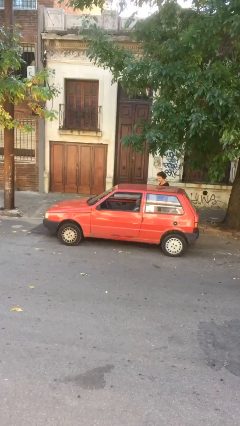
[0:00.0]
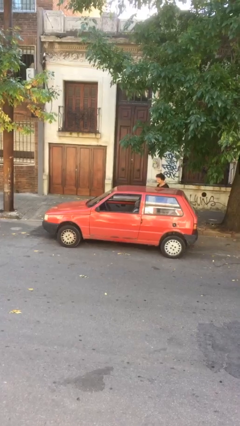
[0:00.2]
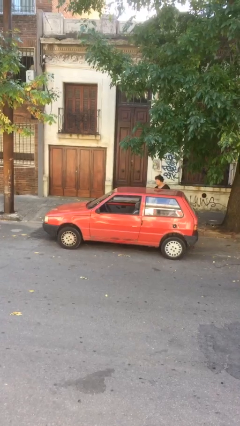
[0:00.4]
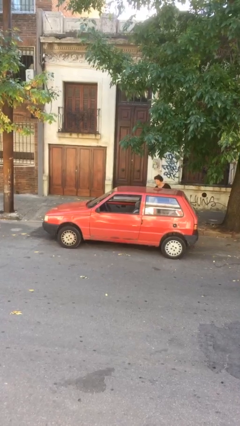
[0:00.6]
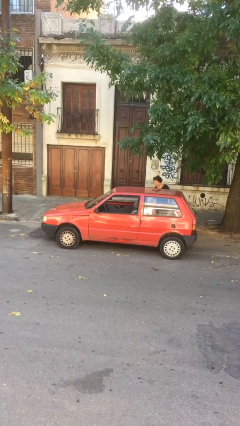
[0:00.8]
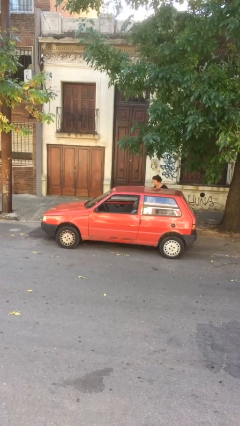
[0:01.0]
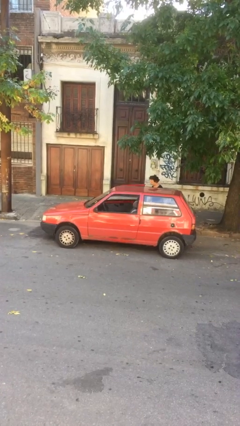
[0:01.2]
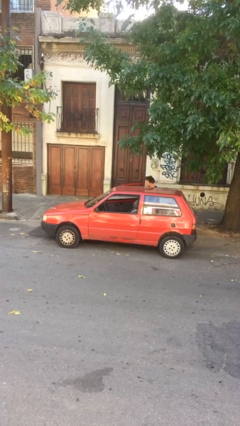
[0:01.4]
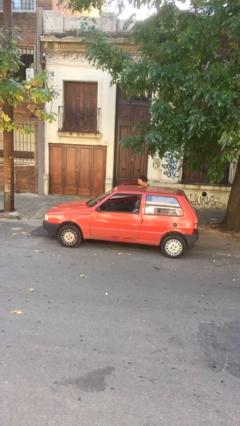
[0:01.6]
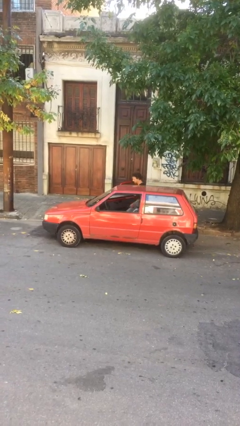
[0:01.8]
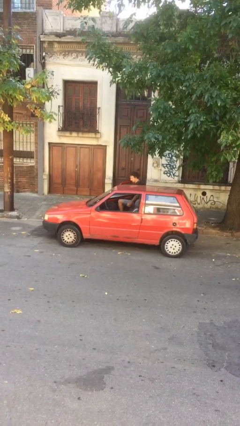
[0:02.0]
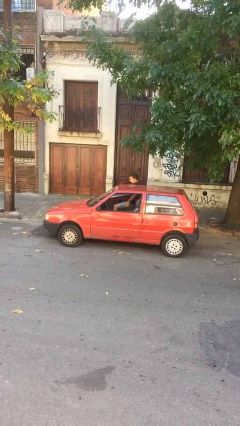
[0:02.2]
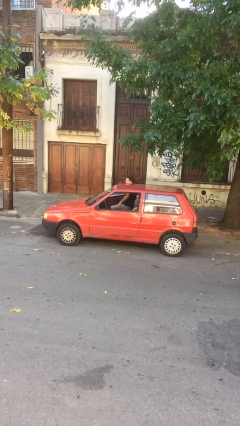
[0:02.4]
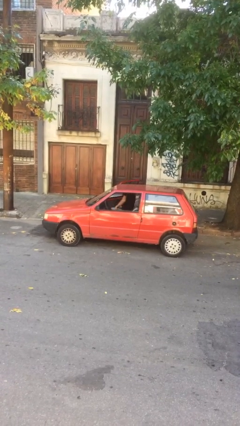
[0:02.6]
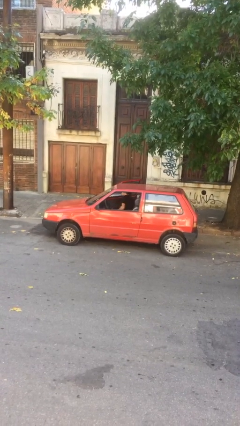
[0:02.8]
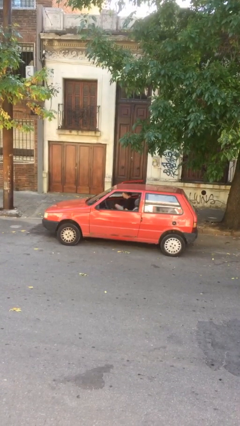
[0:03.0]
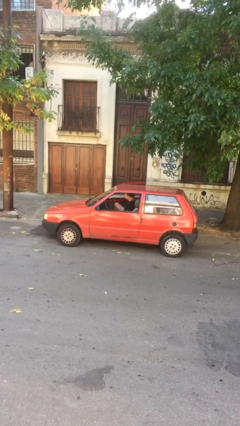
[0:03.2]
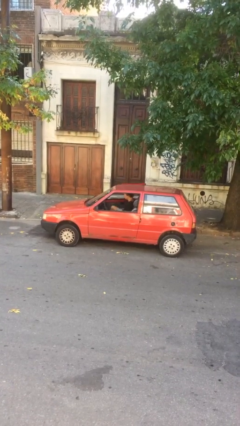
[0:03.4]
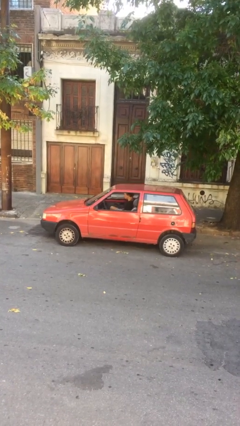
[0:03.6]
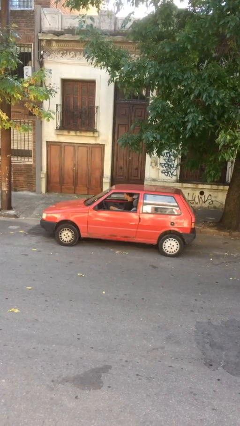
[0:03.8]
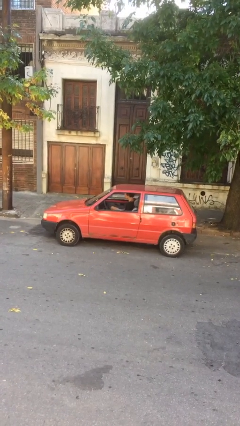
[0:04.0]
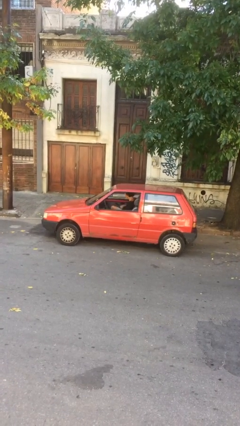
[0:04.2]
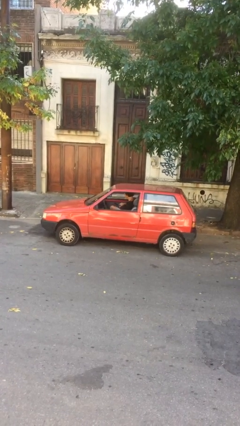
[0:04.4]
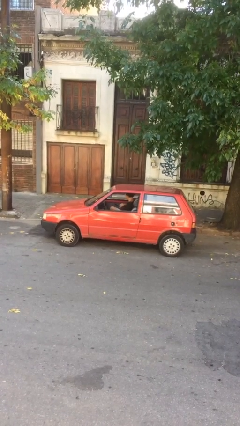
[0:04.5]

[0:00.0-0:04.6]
car picks up person

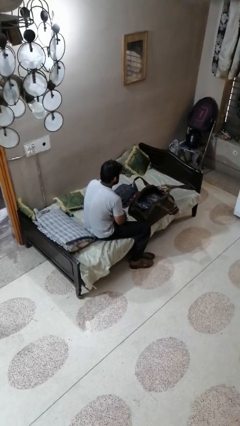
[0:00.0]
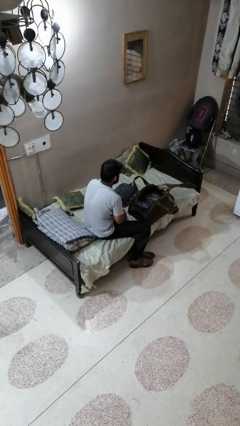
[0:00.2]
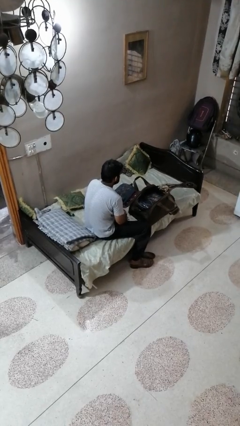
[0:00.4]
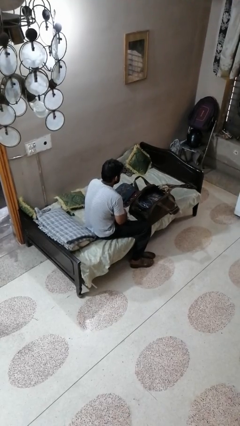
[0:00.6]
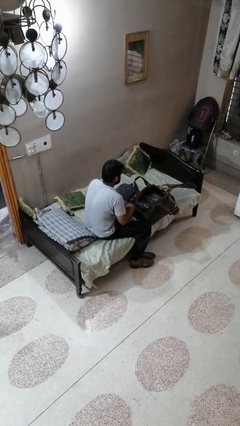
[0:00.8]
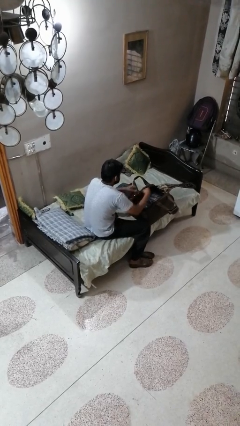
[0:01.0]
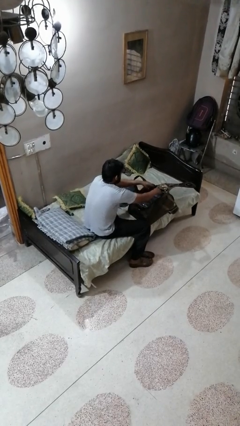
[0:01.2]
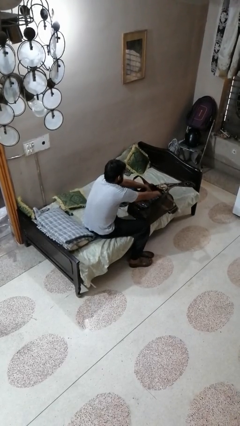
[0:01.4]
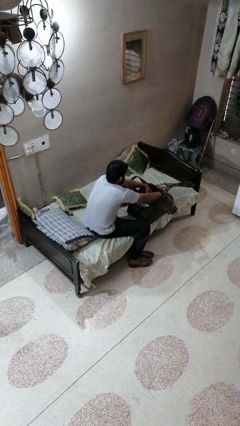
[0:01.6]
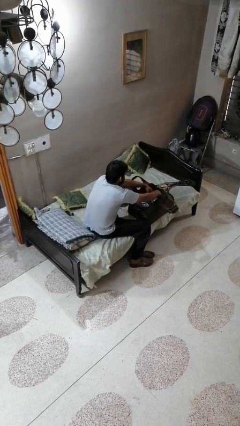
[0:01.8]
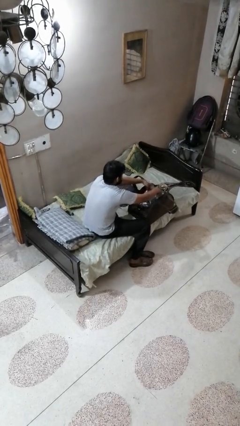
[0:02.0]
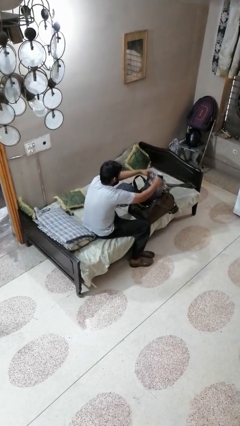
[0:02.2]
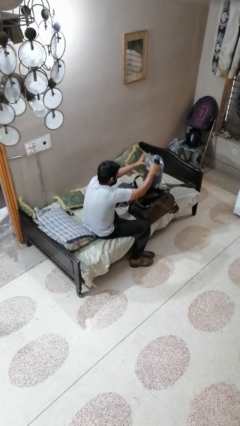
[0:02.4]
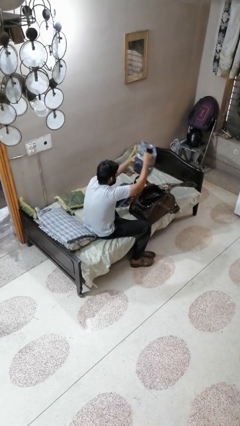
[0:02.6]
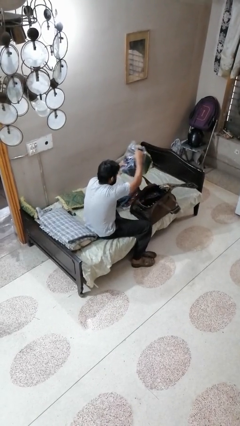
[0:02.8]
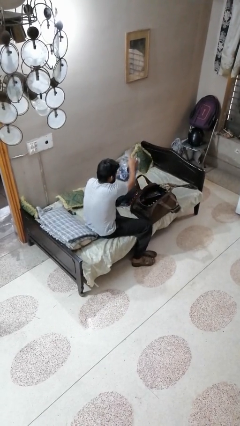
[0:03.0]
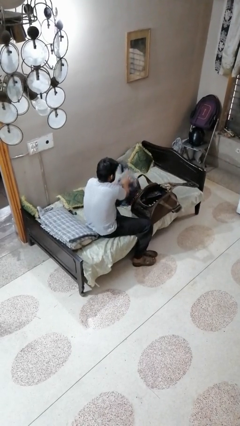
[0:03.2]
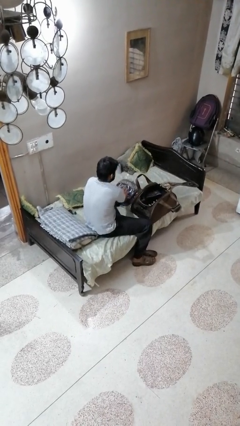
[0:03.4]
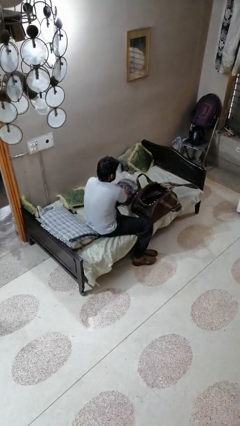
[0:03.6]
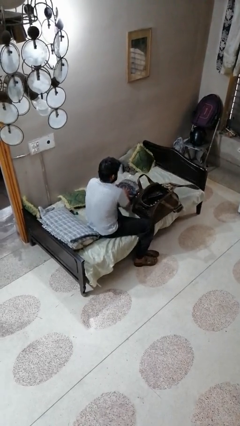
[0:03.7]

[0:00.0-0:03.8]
person unloads clothes from suitcase

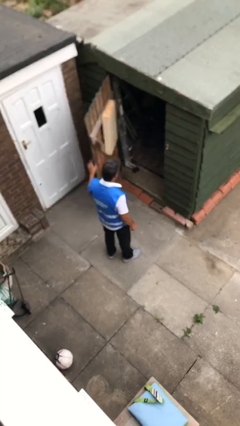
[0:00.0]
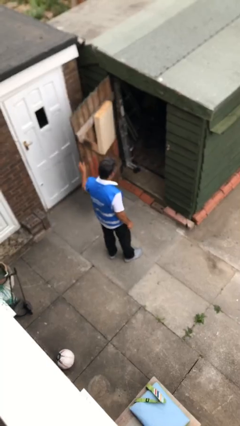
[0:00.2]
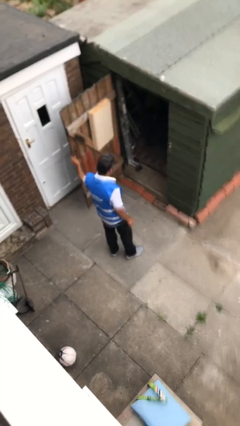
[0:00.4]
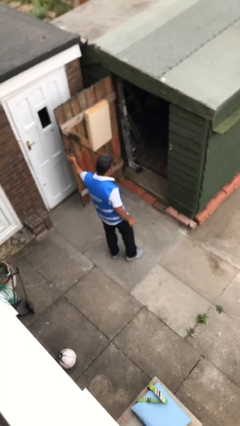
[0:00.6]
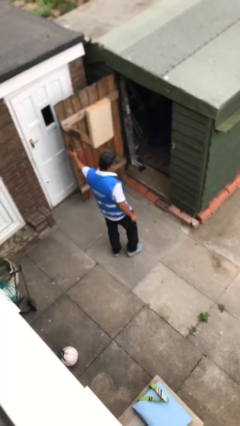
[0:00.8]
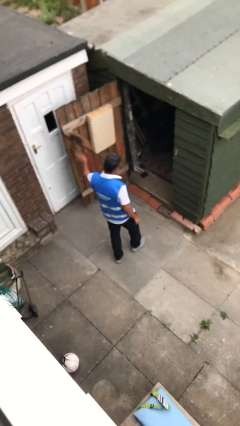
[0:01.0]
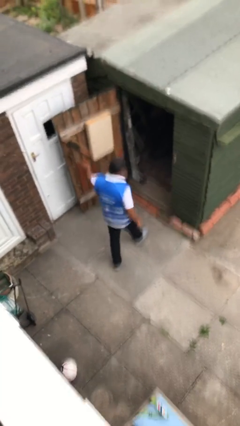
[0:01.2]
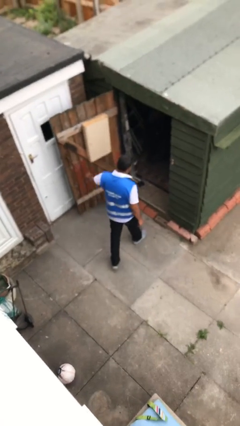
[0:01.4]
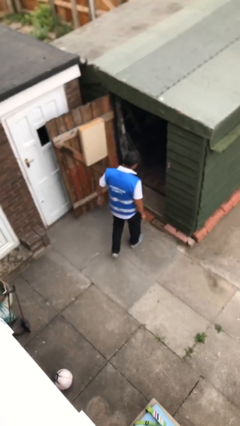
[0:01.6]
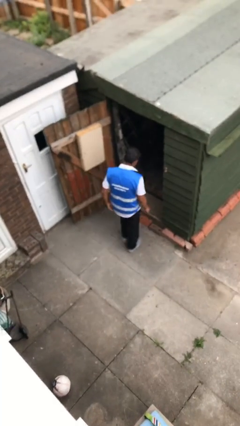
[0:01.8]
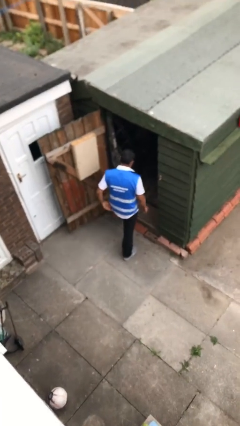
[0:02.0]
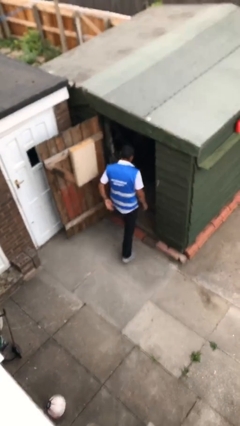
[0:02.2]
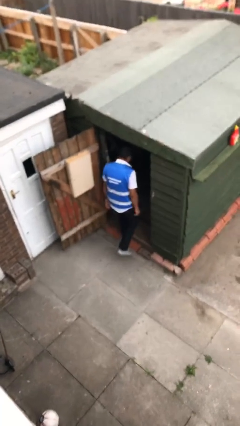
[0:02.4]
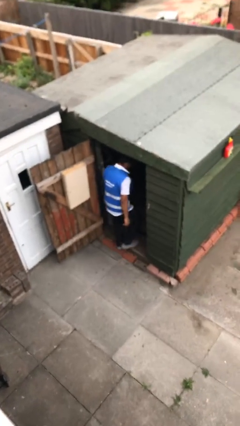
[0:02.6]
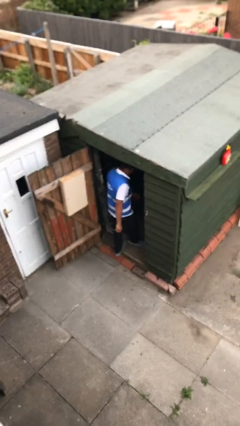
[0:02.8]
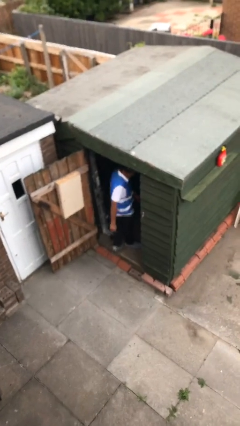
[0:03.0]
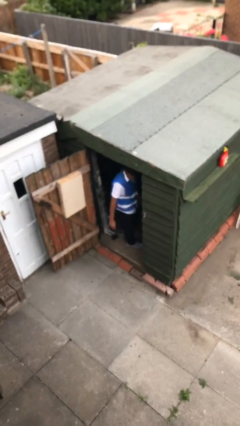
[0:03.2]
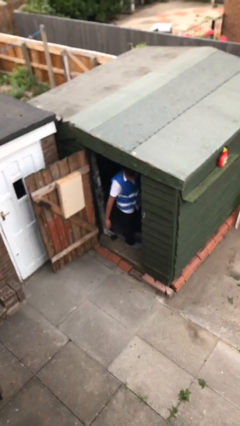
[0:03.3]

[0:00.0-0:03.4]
person exits scene through structure

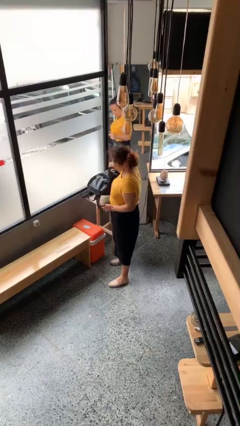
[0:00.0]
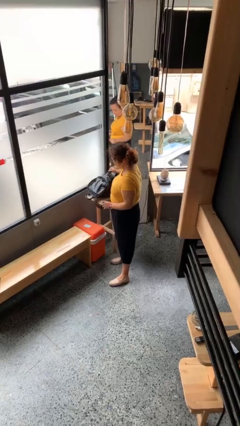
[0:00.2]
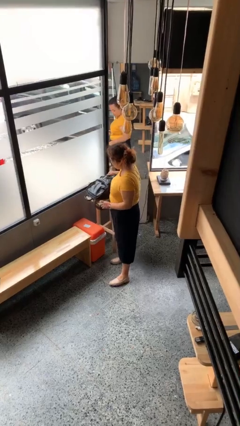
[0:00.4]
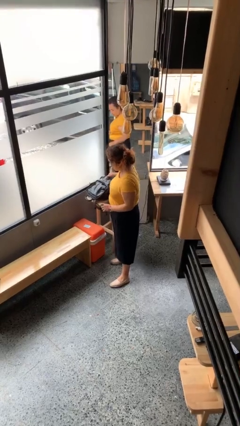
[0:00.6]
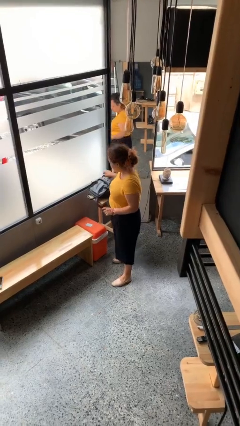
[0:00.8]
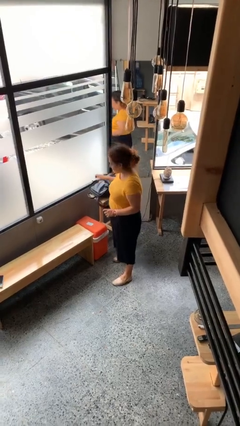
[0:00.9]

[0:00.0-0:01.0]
person puts down object on table

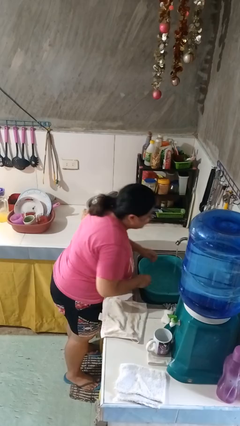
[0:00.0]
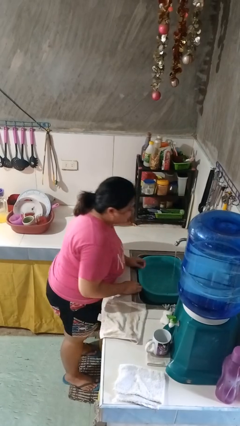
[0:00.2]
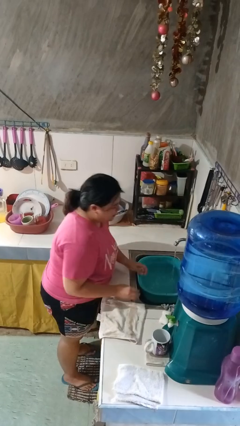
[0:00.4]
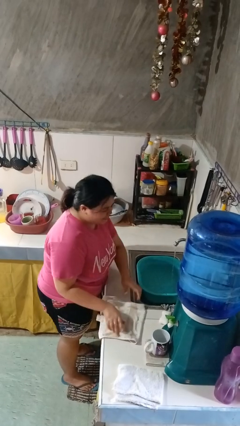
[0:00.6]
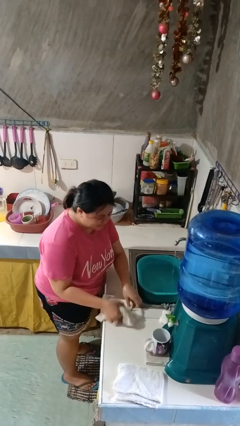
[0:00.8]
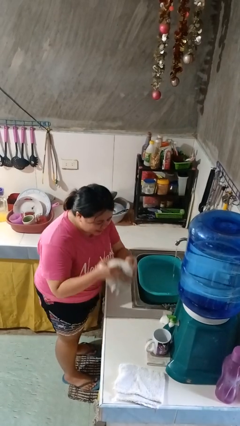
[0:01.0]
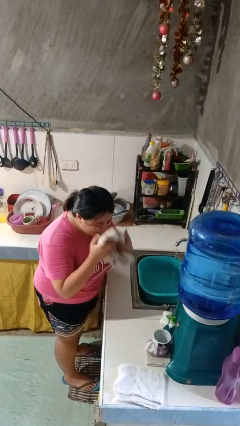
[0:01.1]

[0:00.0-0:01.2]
person dries face with towel

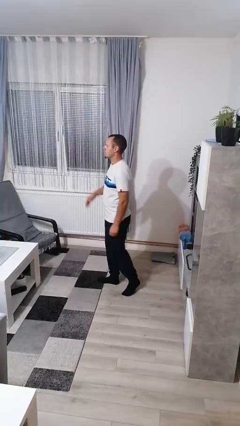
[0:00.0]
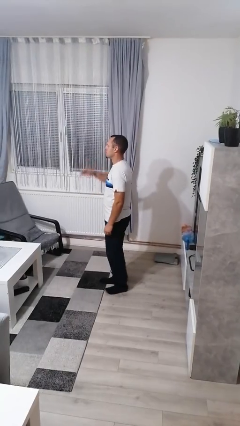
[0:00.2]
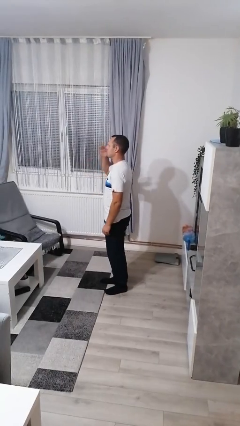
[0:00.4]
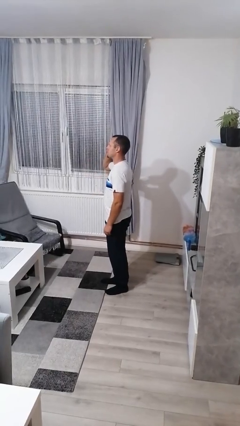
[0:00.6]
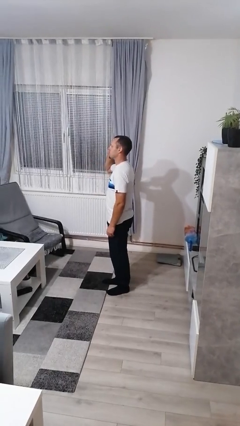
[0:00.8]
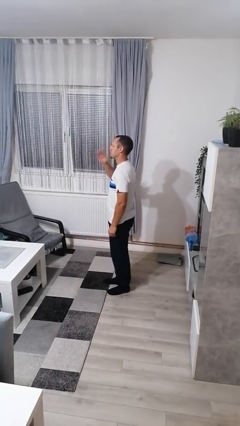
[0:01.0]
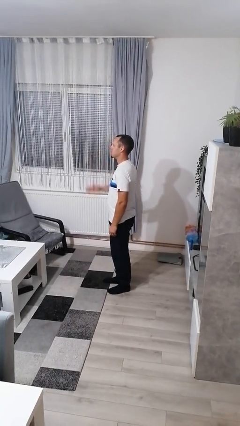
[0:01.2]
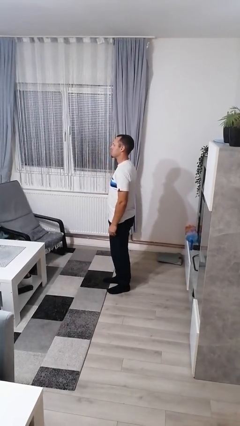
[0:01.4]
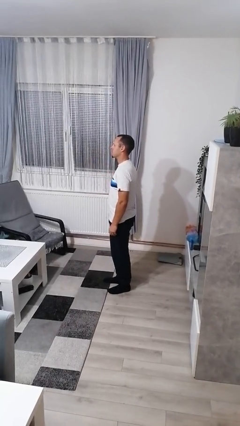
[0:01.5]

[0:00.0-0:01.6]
person salutes

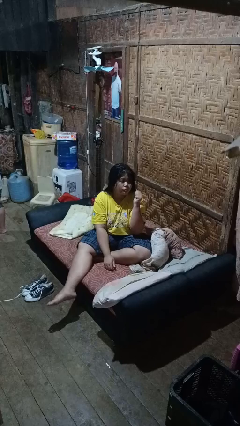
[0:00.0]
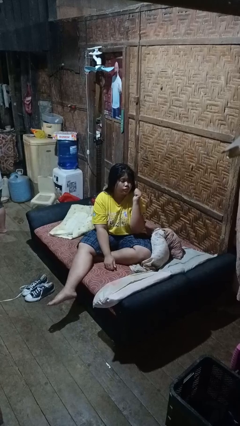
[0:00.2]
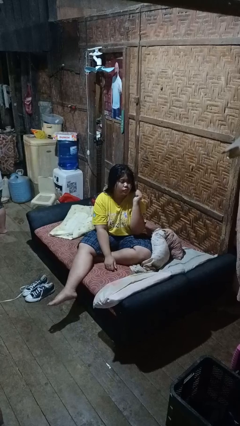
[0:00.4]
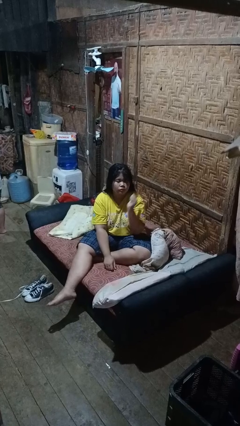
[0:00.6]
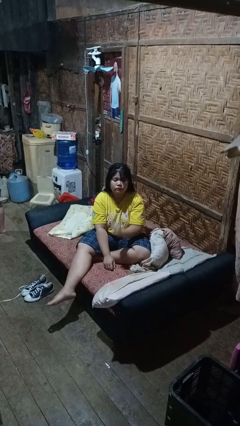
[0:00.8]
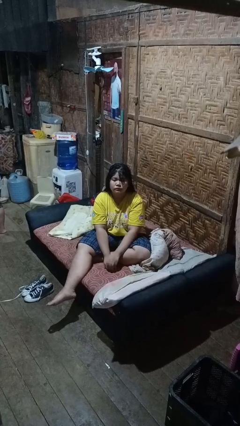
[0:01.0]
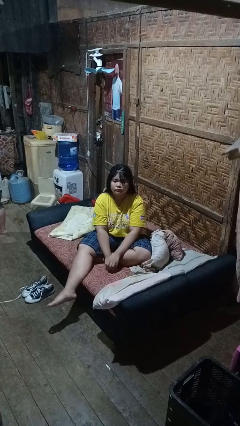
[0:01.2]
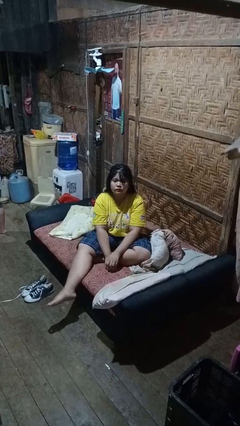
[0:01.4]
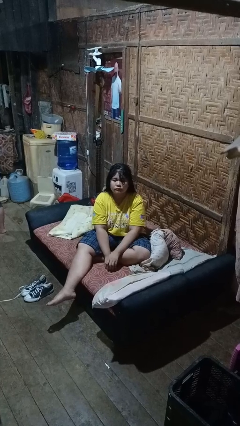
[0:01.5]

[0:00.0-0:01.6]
person gestures behind me
